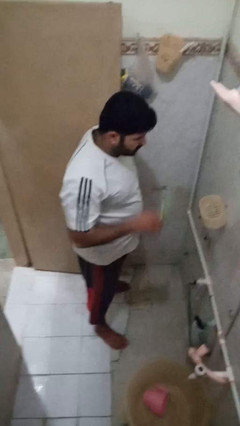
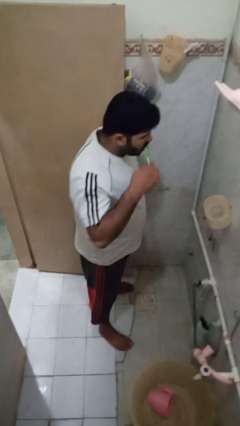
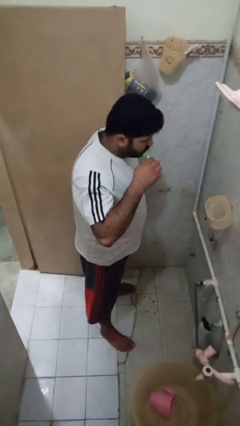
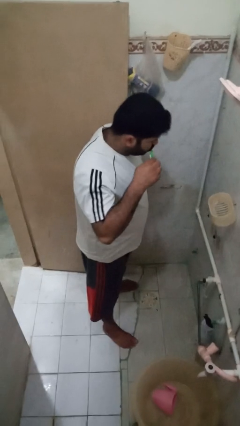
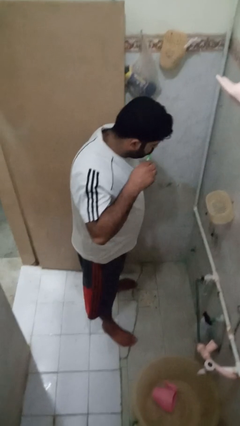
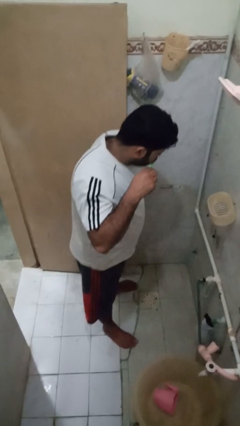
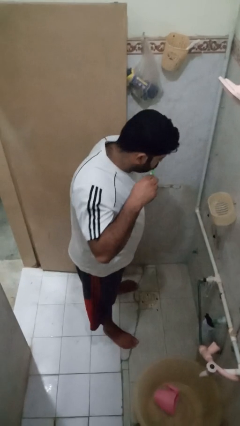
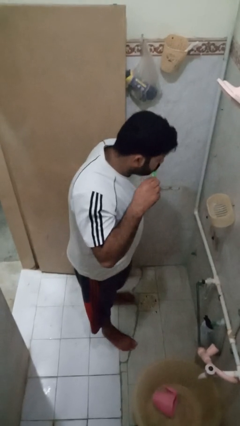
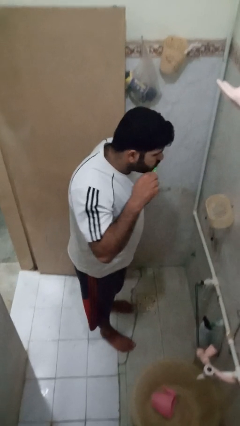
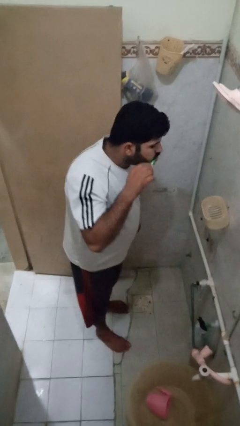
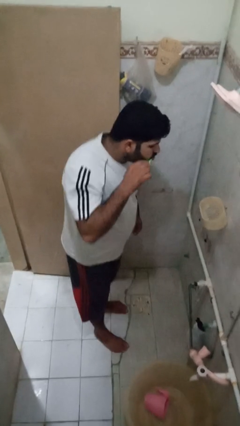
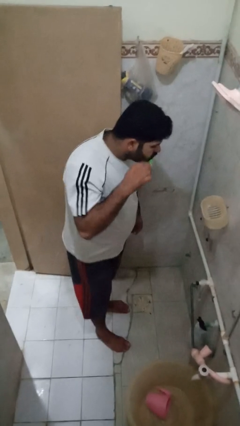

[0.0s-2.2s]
person brushes teeth

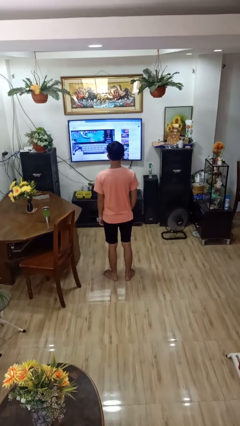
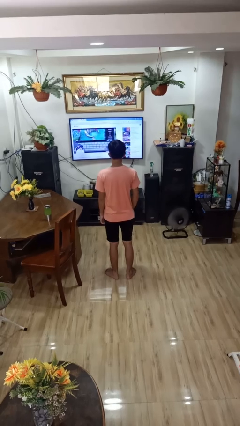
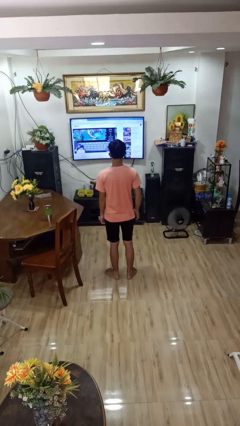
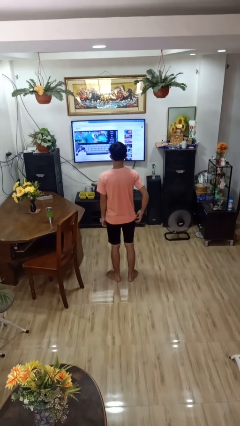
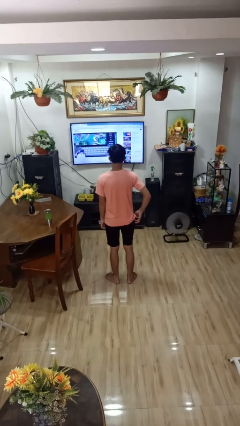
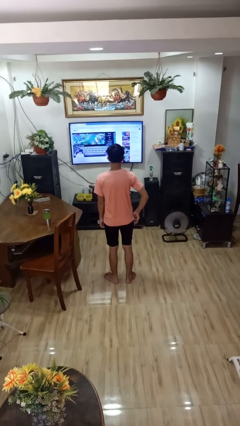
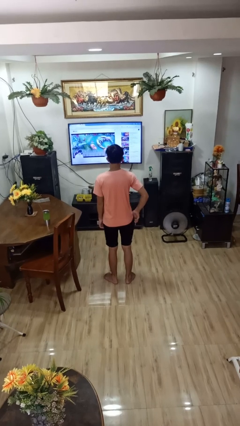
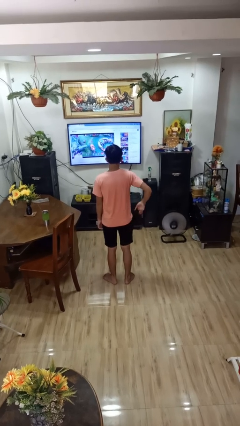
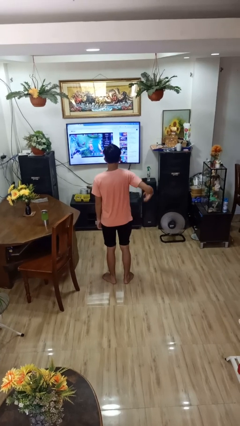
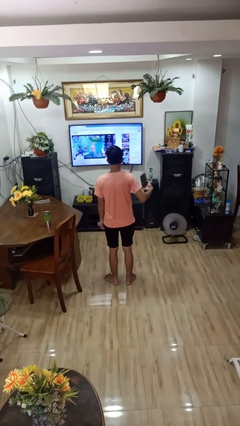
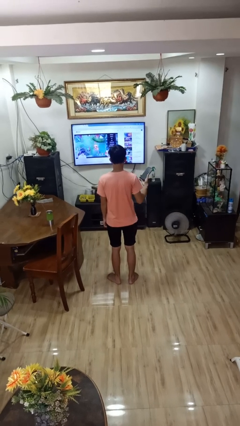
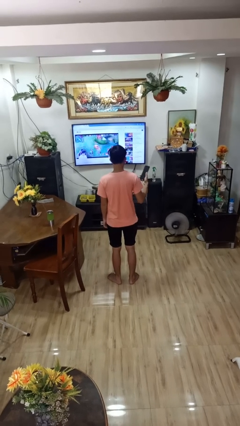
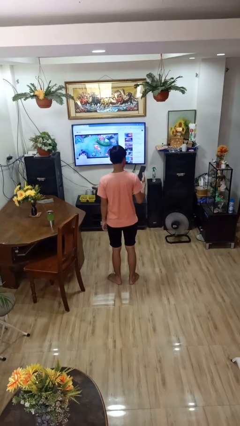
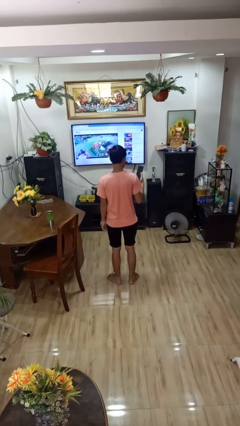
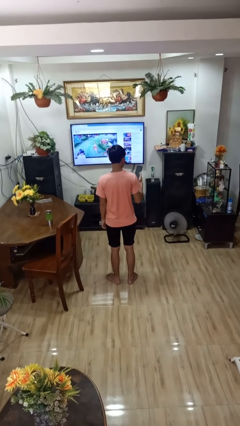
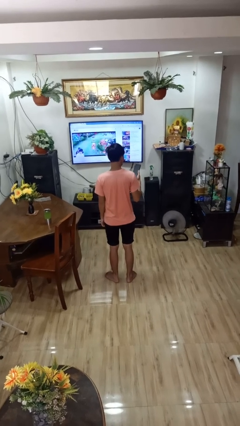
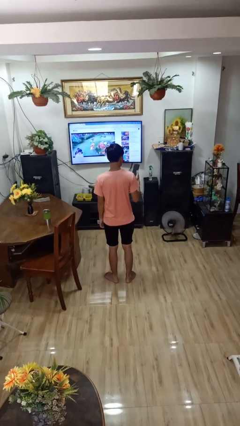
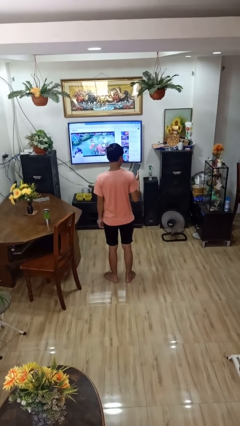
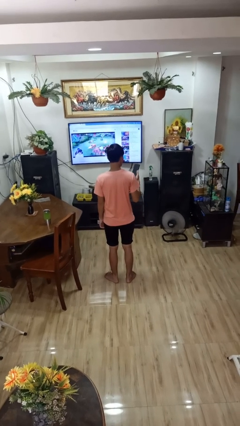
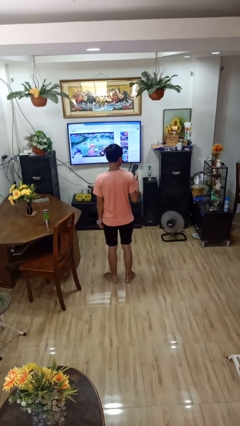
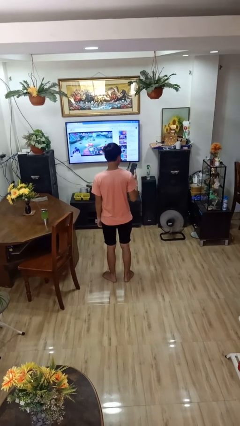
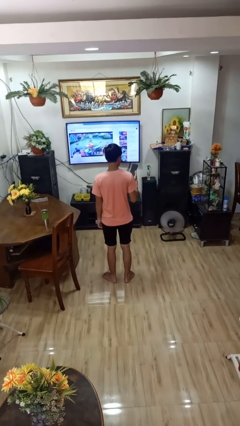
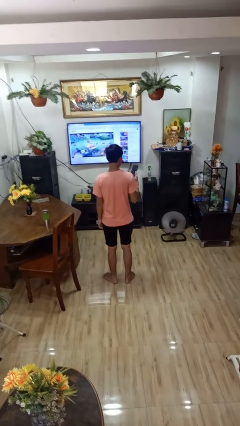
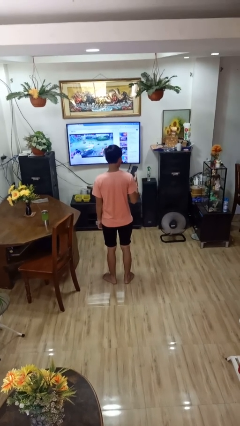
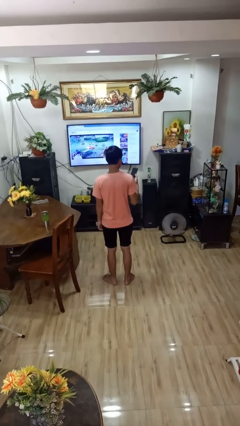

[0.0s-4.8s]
person takes phone from pocket

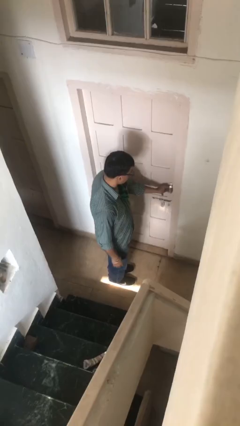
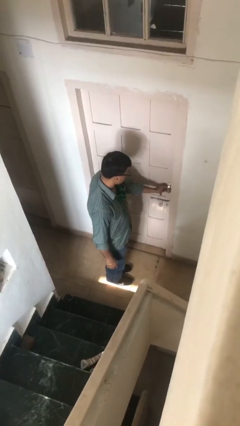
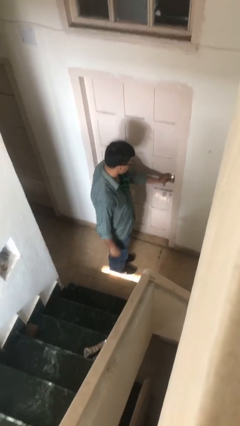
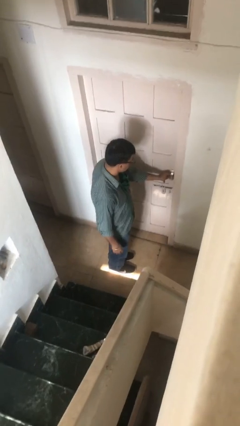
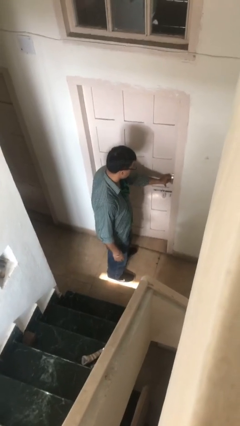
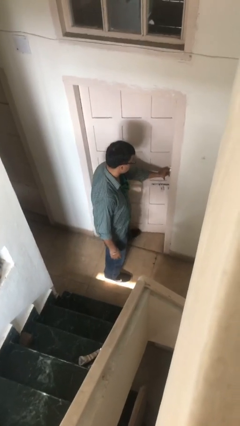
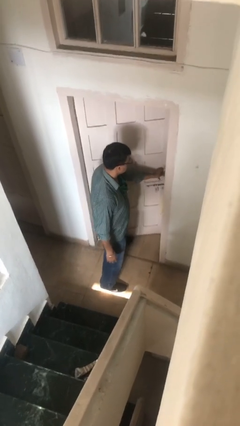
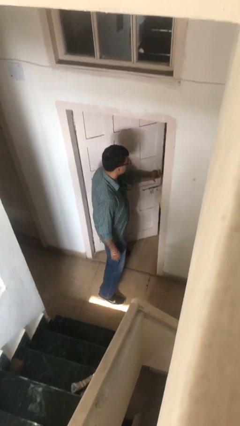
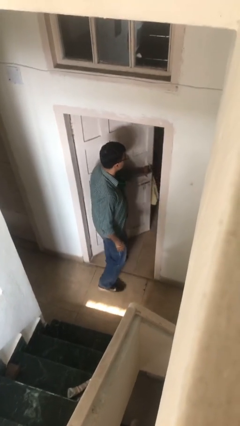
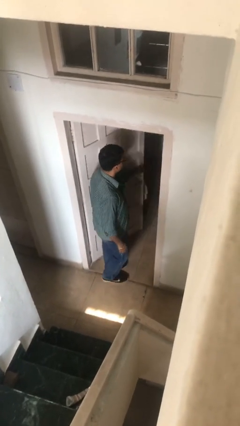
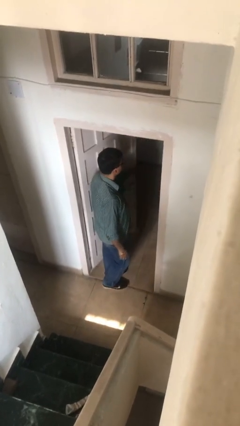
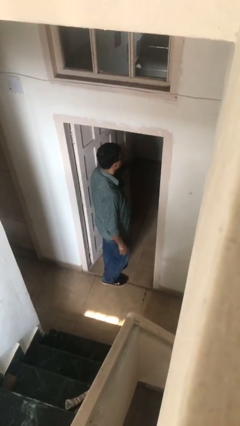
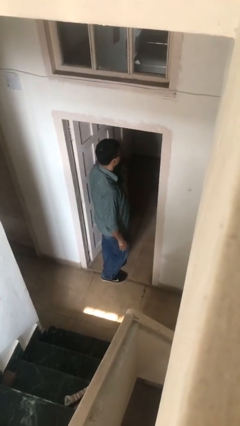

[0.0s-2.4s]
person opens facility door

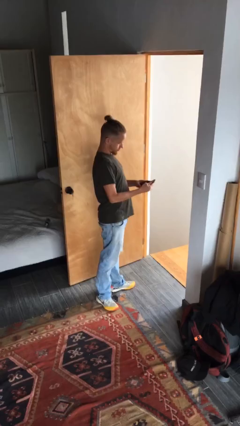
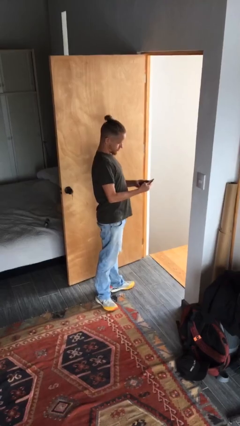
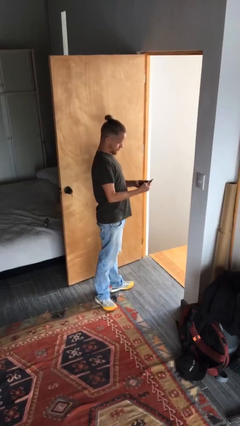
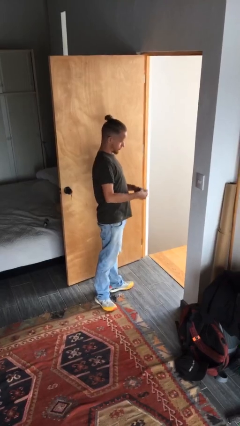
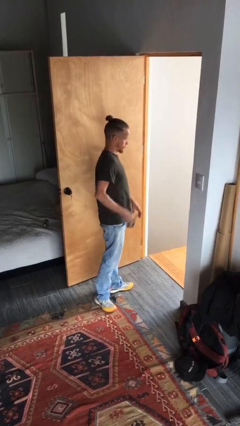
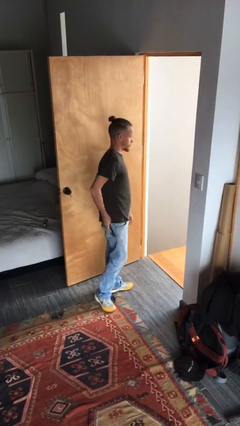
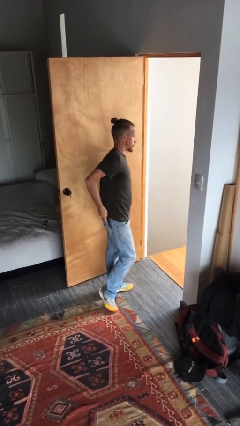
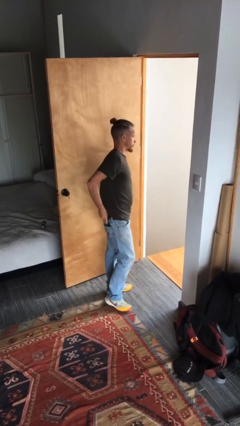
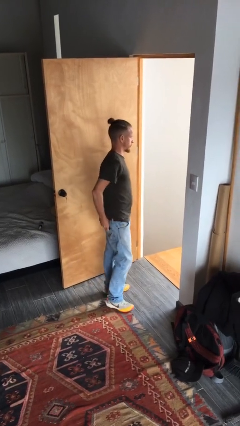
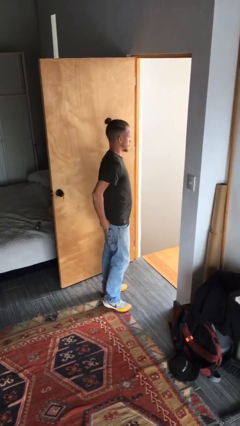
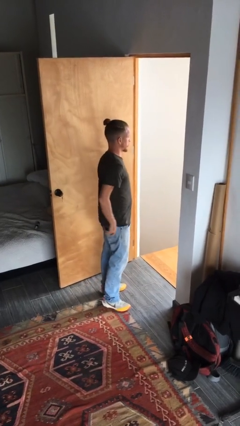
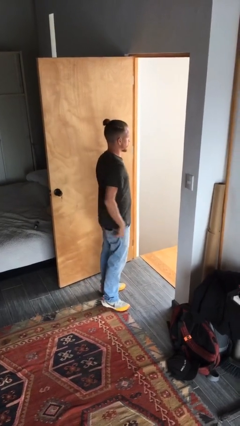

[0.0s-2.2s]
person puts phone into pocket

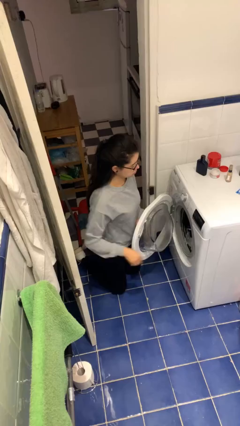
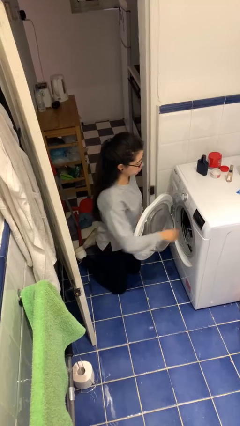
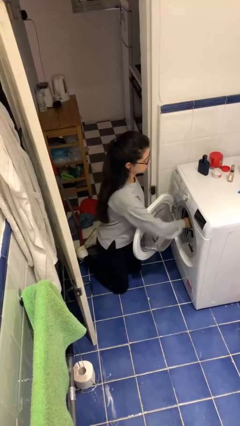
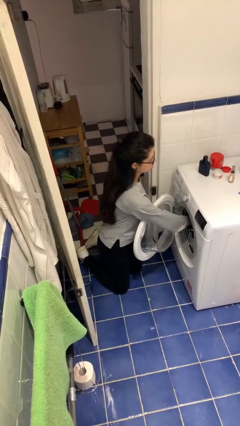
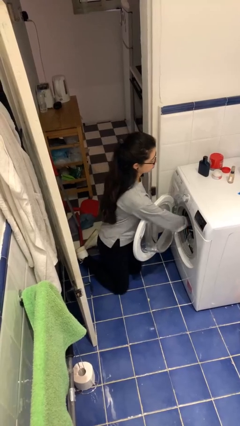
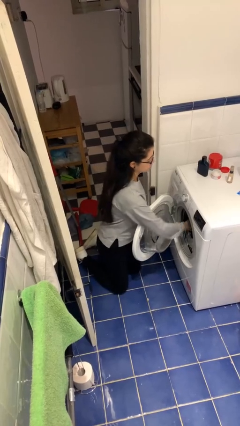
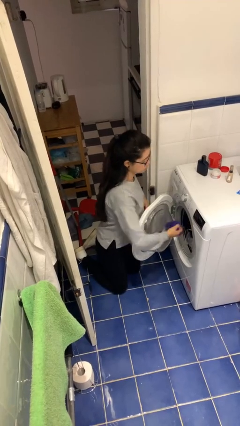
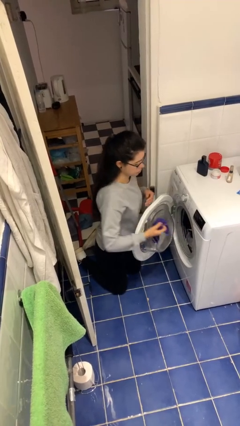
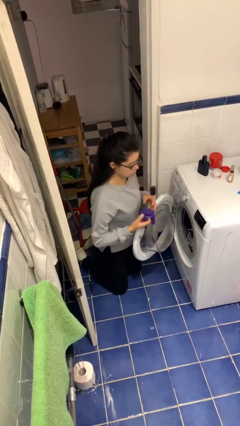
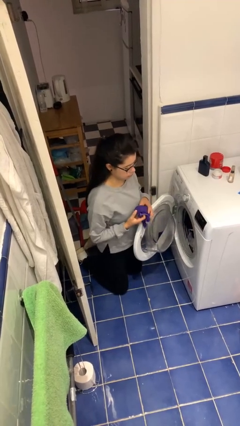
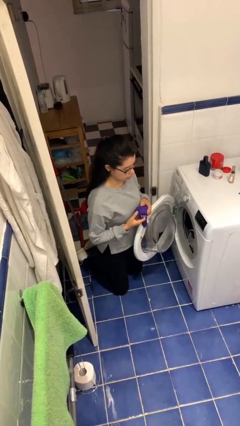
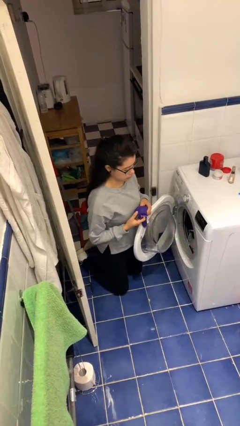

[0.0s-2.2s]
person unloads clotheswasher

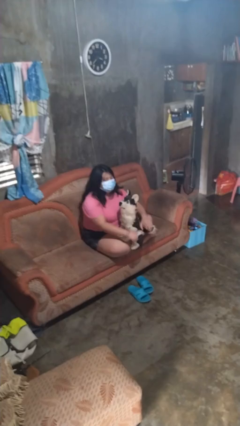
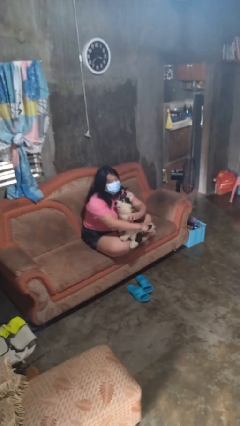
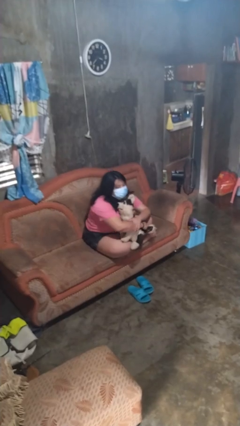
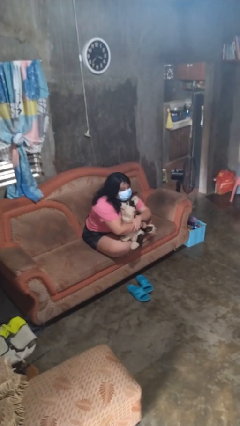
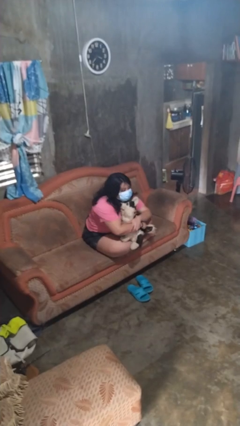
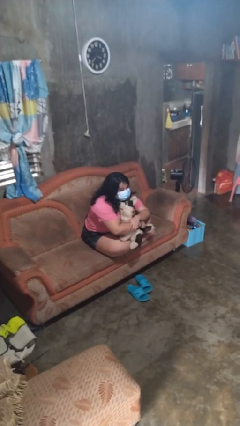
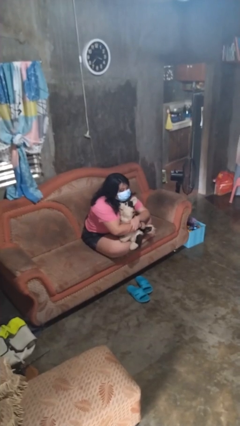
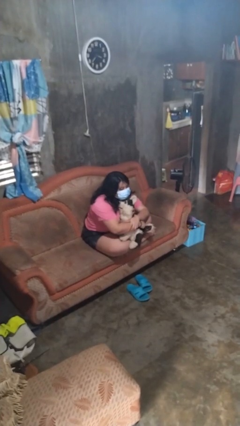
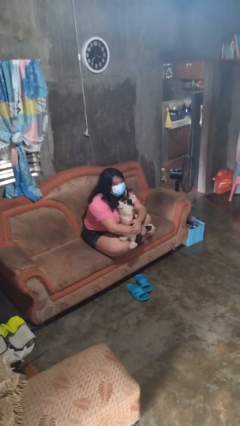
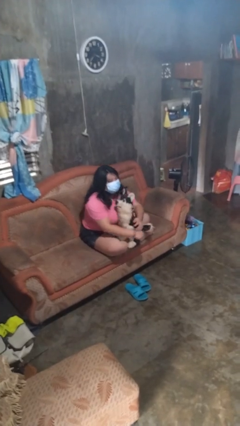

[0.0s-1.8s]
person hugs stuffed animal

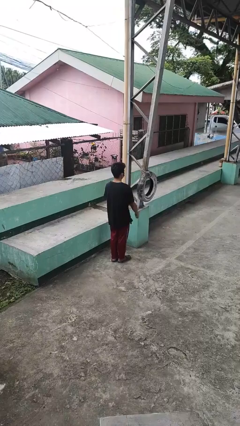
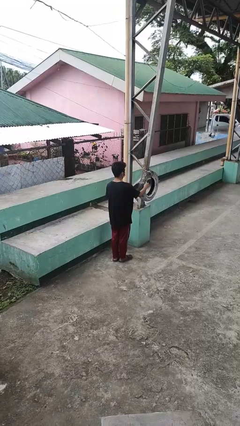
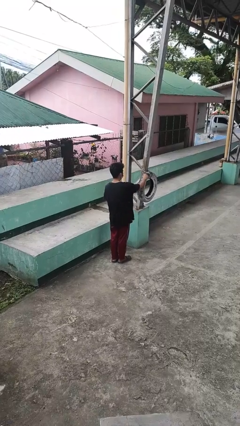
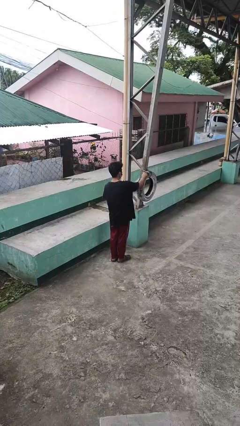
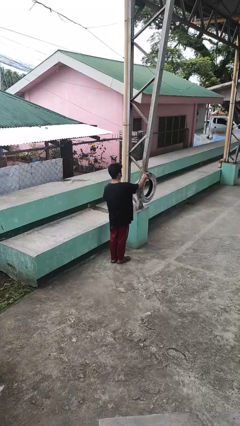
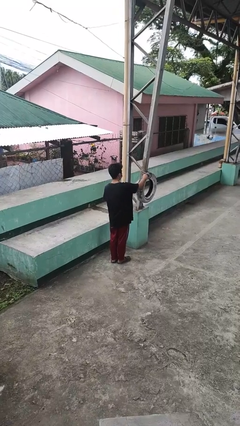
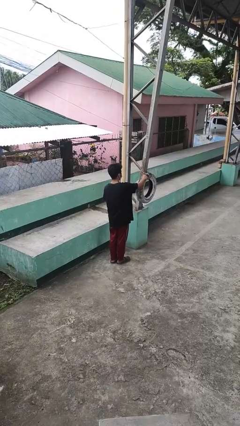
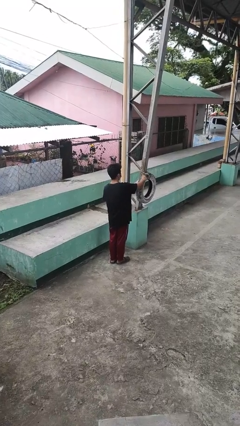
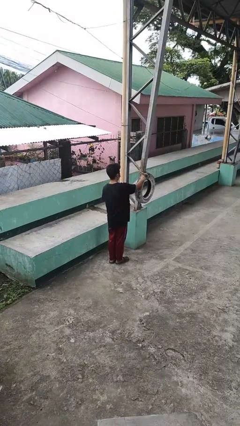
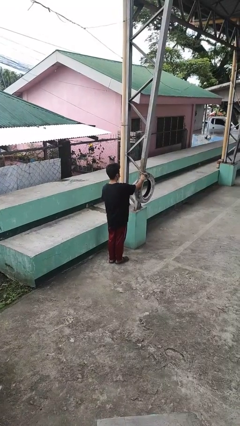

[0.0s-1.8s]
person taps object with finger
